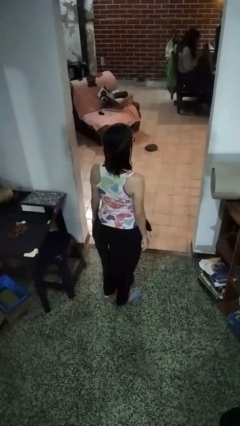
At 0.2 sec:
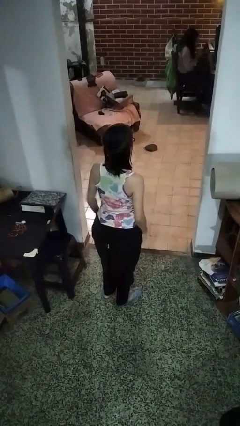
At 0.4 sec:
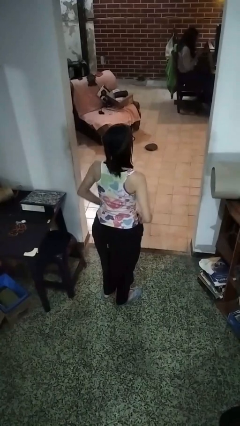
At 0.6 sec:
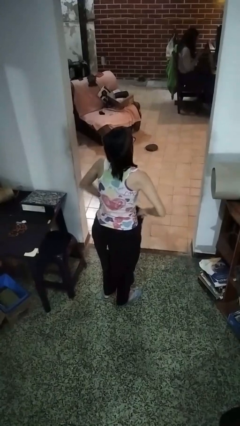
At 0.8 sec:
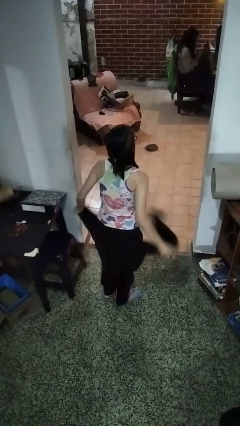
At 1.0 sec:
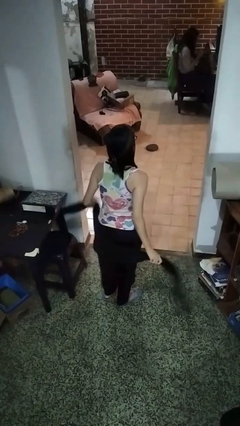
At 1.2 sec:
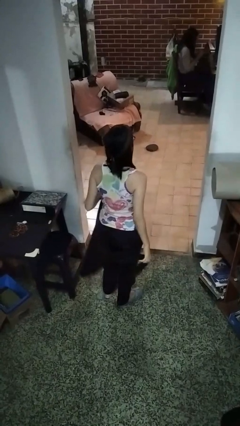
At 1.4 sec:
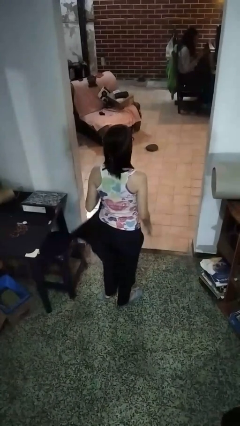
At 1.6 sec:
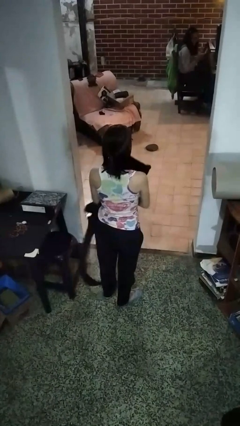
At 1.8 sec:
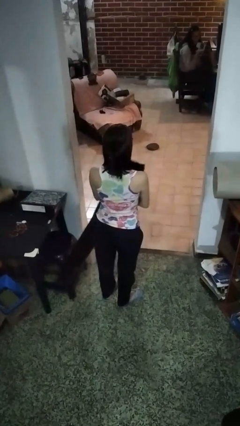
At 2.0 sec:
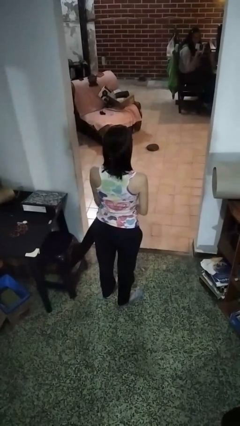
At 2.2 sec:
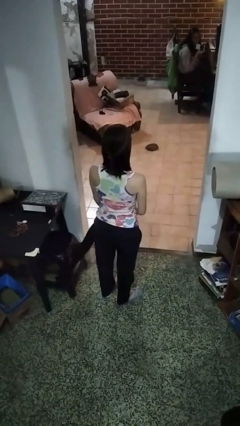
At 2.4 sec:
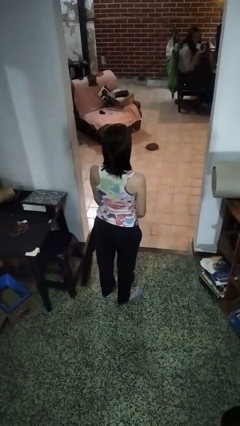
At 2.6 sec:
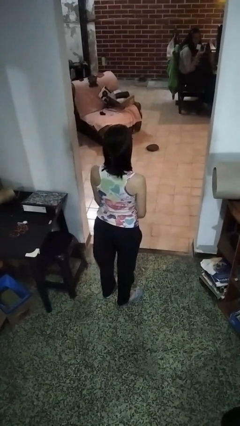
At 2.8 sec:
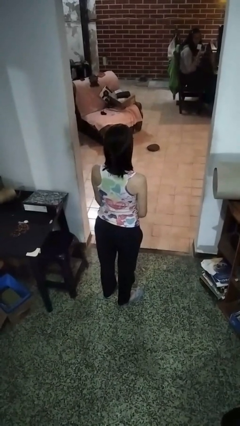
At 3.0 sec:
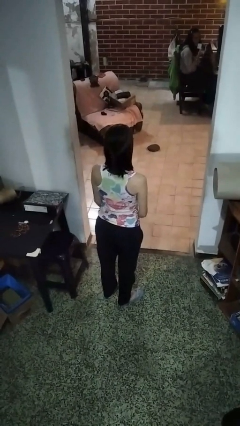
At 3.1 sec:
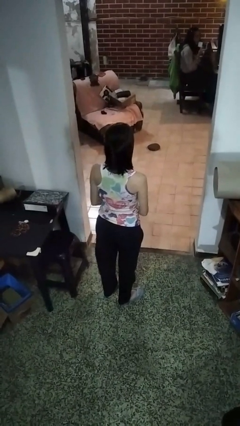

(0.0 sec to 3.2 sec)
person unties jacket around waist

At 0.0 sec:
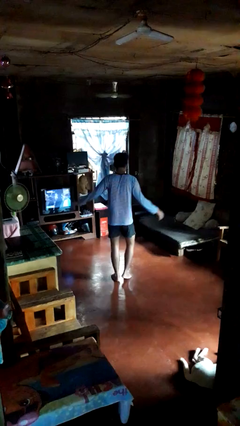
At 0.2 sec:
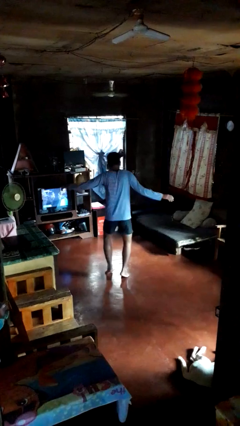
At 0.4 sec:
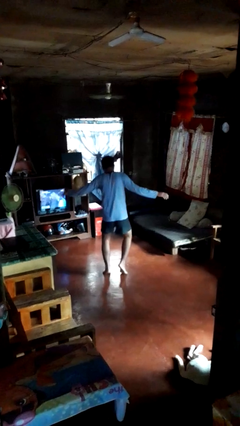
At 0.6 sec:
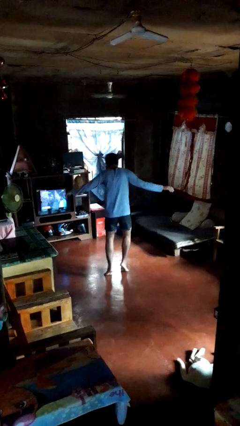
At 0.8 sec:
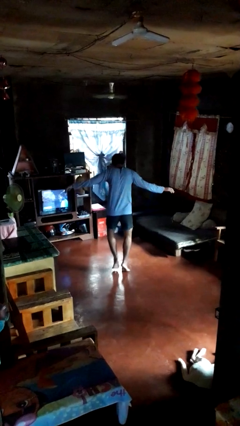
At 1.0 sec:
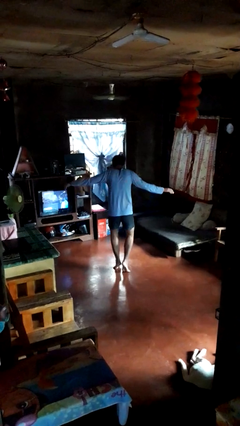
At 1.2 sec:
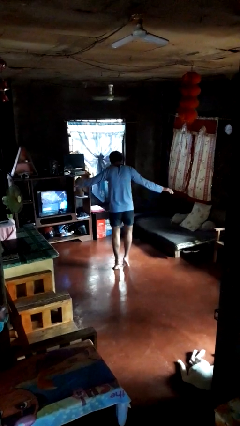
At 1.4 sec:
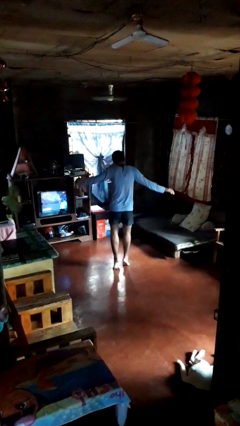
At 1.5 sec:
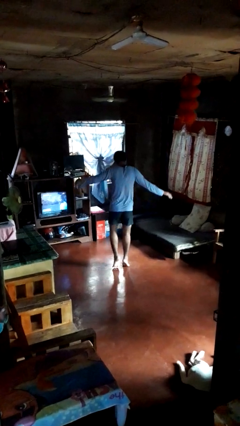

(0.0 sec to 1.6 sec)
person walks tiptoe

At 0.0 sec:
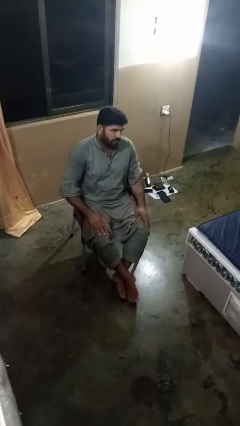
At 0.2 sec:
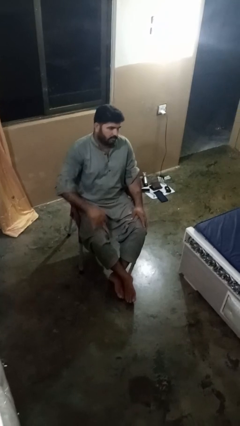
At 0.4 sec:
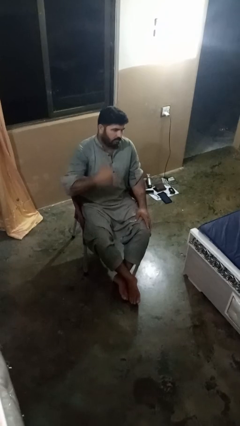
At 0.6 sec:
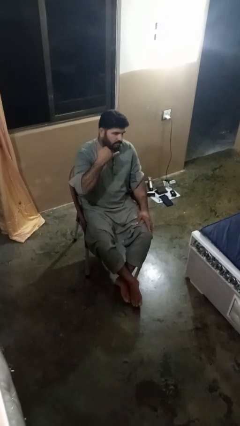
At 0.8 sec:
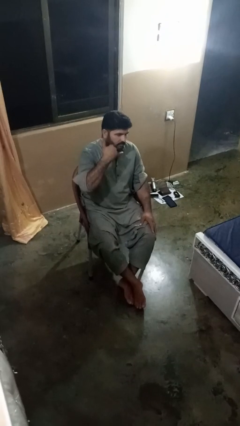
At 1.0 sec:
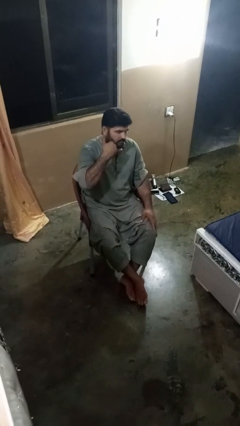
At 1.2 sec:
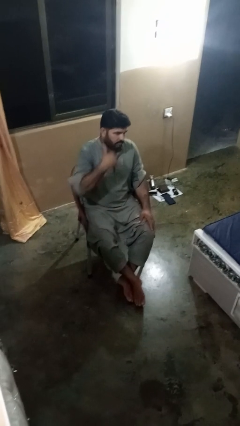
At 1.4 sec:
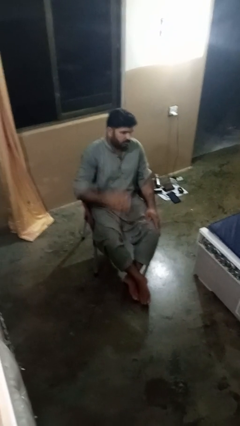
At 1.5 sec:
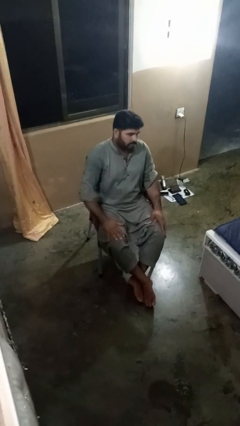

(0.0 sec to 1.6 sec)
person gestures call me

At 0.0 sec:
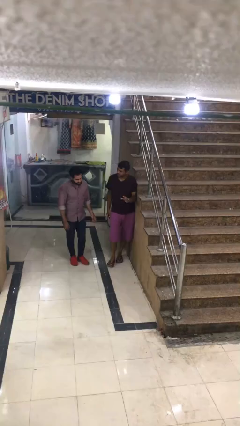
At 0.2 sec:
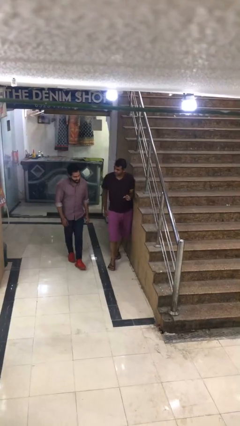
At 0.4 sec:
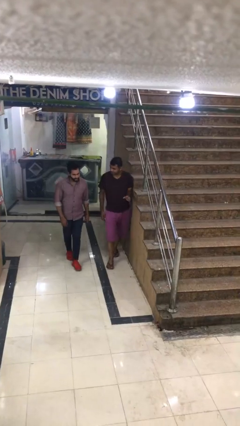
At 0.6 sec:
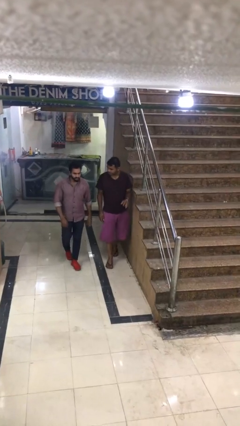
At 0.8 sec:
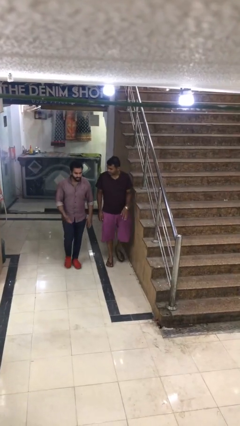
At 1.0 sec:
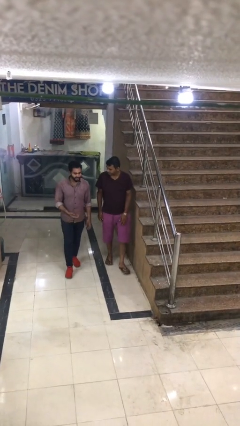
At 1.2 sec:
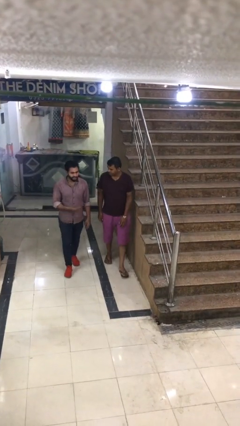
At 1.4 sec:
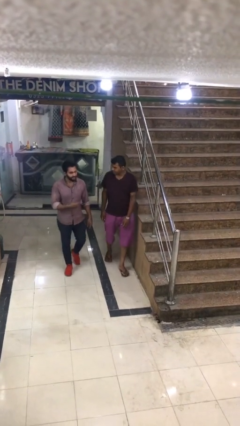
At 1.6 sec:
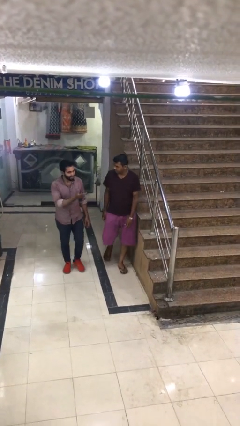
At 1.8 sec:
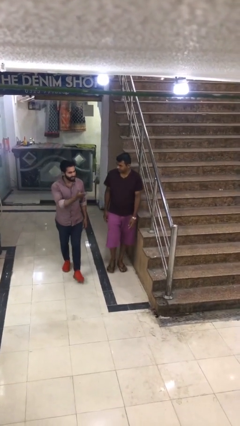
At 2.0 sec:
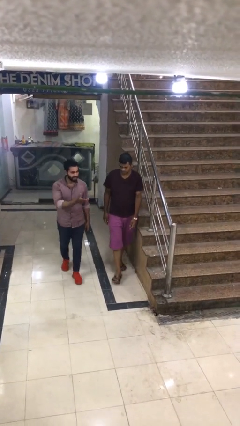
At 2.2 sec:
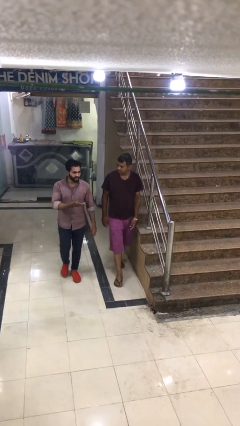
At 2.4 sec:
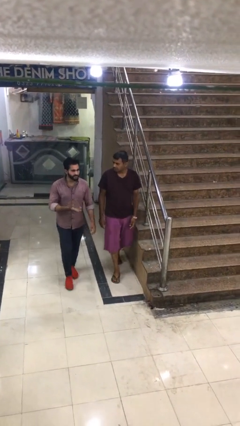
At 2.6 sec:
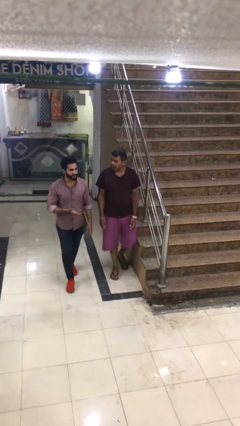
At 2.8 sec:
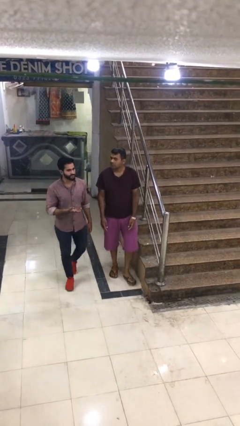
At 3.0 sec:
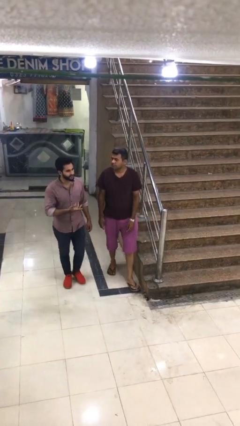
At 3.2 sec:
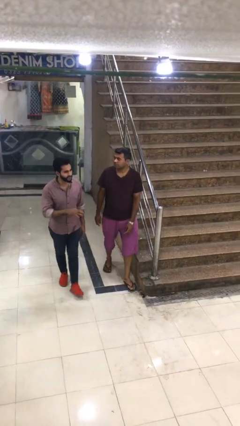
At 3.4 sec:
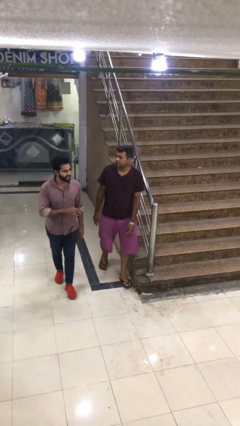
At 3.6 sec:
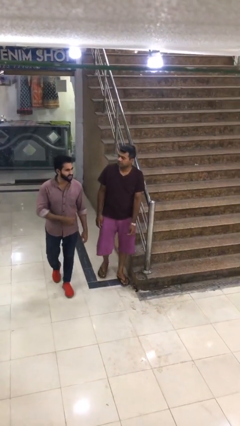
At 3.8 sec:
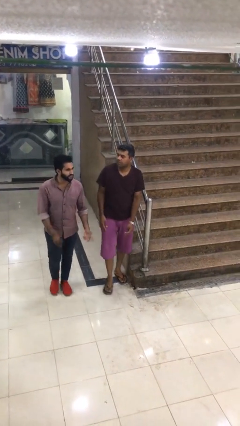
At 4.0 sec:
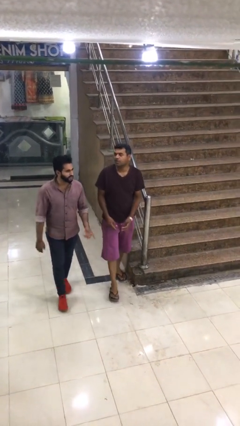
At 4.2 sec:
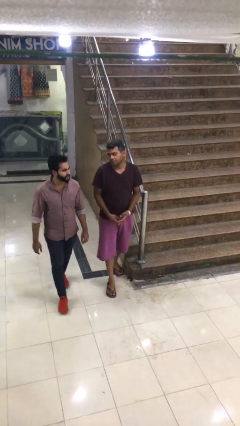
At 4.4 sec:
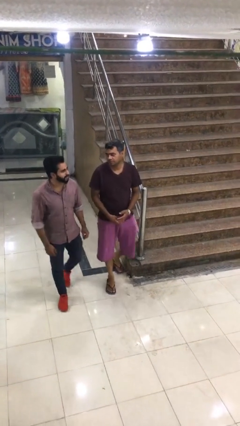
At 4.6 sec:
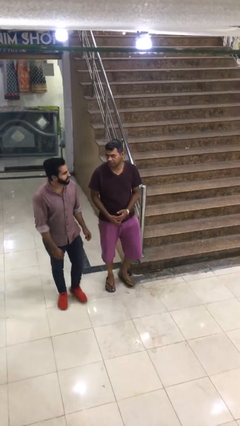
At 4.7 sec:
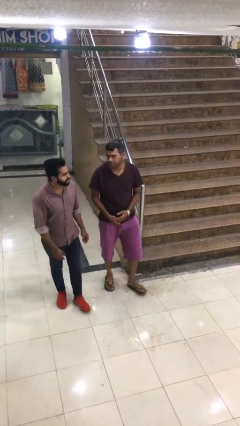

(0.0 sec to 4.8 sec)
person talks to person

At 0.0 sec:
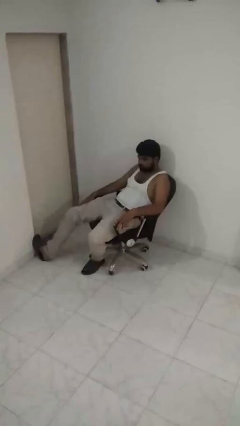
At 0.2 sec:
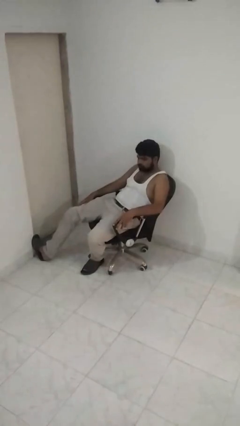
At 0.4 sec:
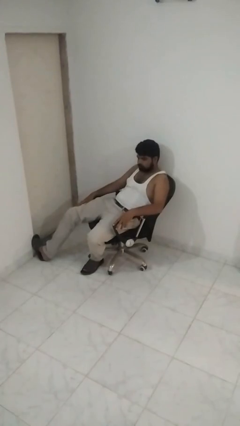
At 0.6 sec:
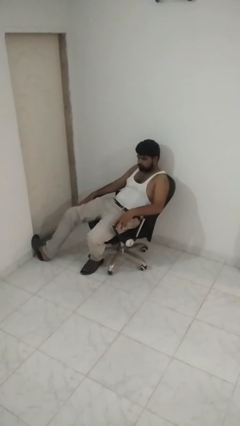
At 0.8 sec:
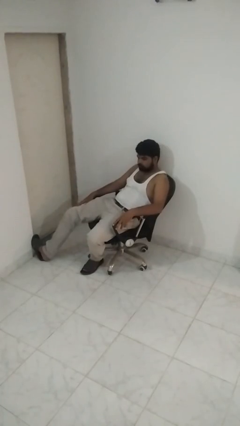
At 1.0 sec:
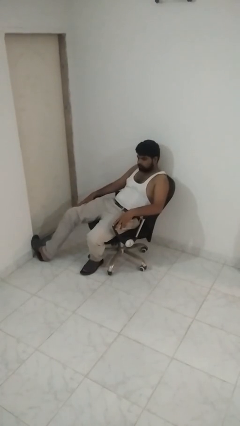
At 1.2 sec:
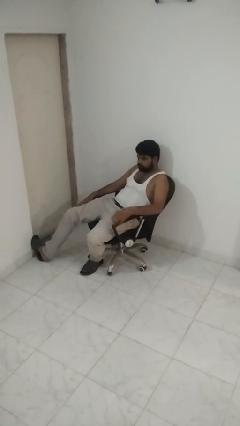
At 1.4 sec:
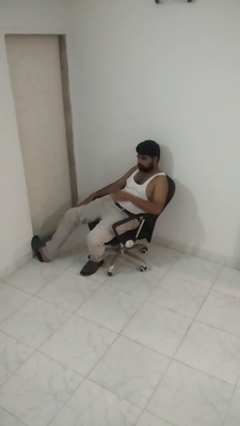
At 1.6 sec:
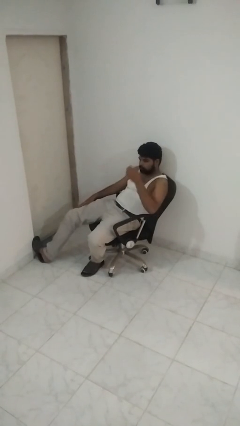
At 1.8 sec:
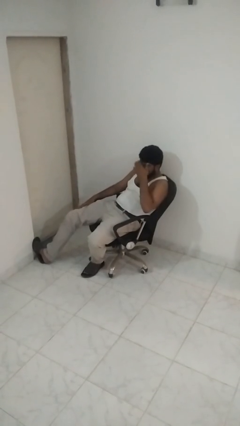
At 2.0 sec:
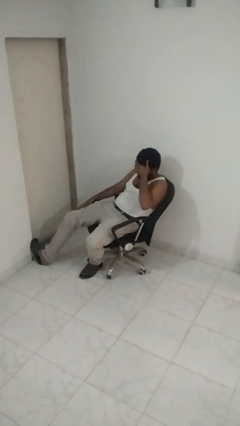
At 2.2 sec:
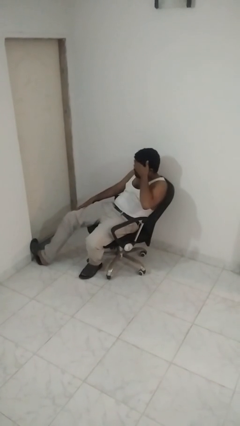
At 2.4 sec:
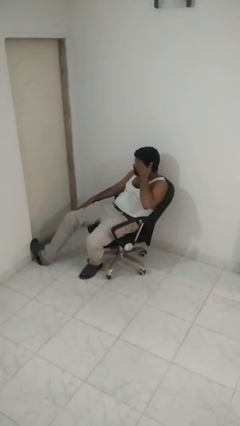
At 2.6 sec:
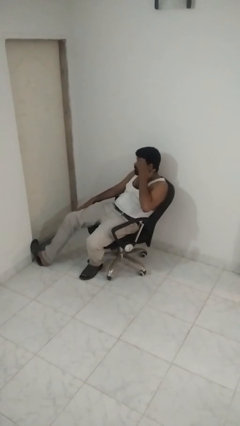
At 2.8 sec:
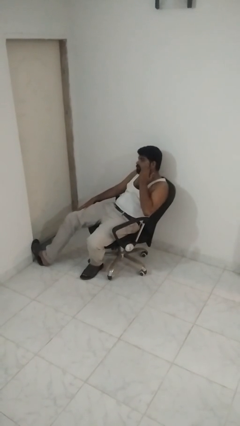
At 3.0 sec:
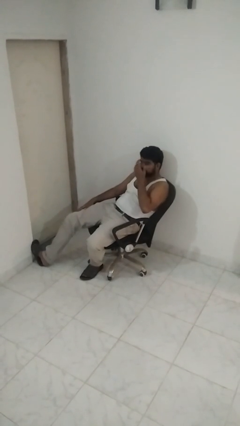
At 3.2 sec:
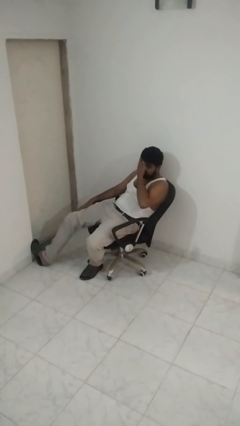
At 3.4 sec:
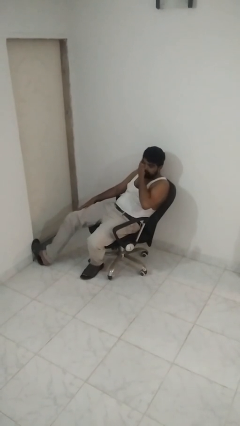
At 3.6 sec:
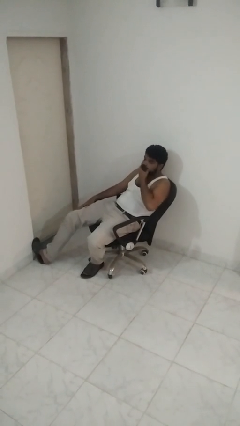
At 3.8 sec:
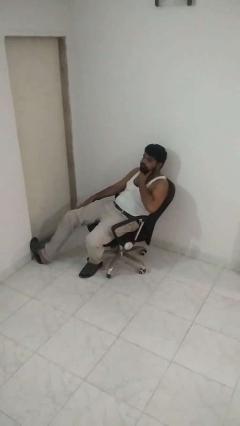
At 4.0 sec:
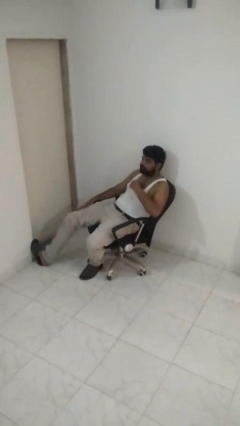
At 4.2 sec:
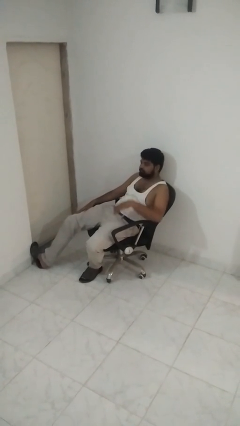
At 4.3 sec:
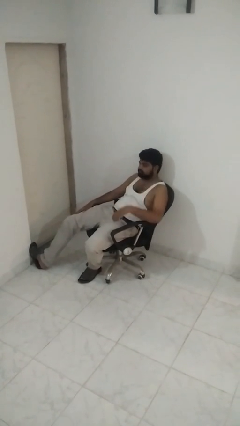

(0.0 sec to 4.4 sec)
person scratches face

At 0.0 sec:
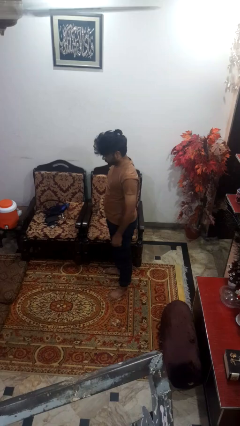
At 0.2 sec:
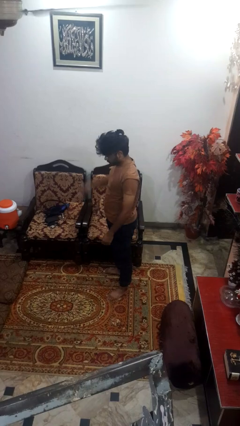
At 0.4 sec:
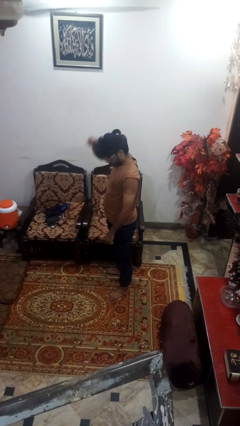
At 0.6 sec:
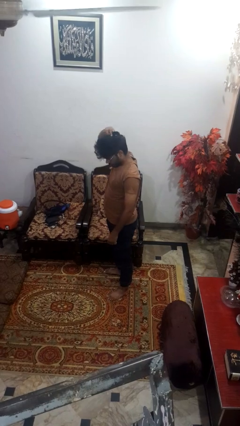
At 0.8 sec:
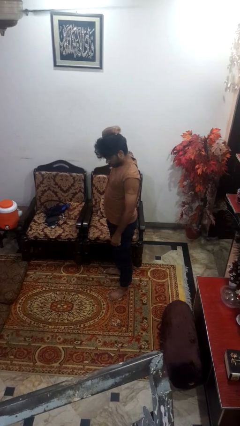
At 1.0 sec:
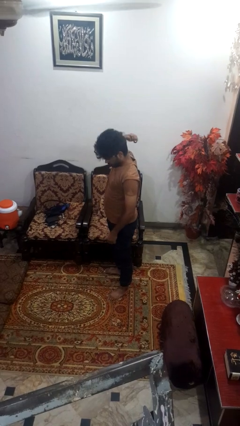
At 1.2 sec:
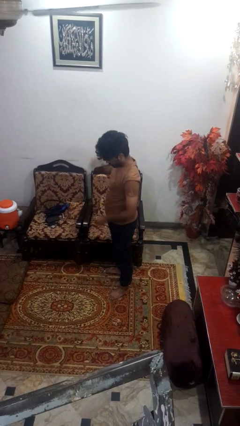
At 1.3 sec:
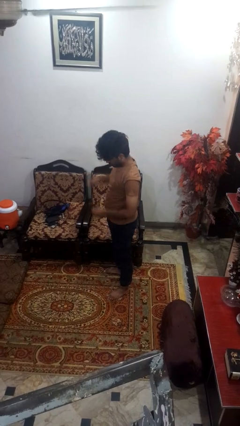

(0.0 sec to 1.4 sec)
person takes off hairtie

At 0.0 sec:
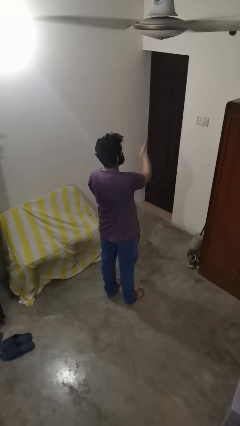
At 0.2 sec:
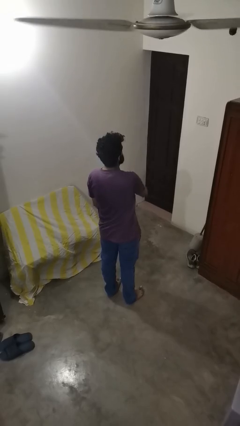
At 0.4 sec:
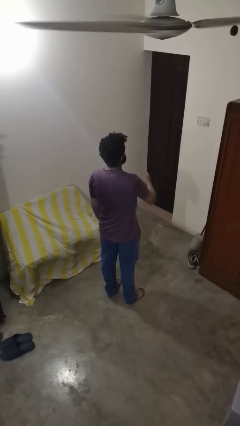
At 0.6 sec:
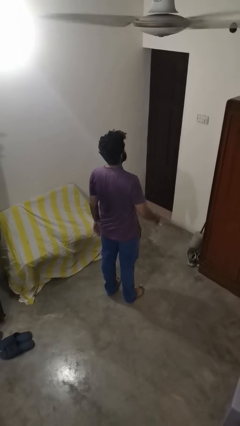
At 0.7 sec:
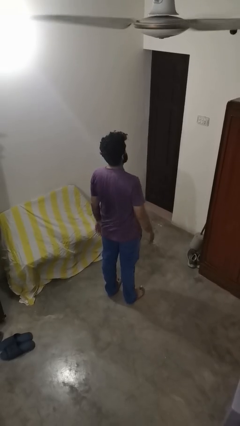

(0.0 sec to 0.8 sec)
person karate chop
